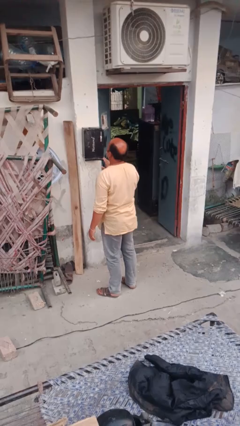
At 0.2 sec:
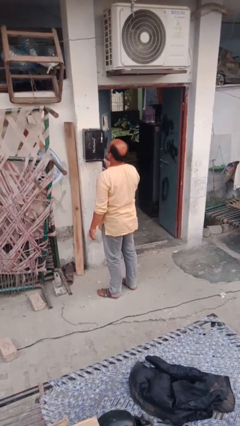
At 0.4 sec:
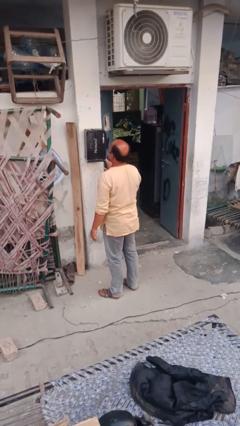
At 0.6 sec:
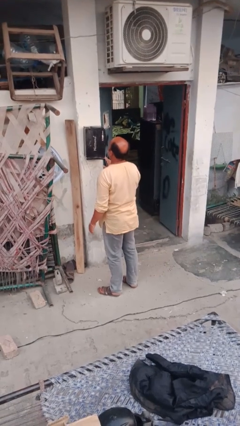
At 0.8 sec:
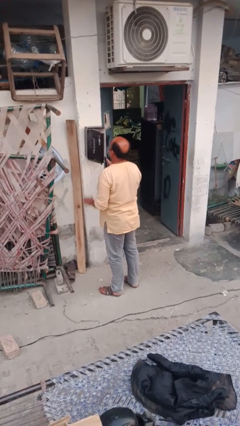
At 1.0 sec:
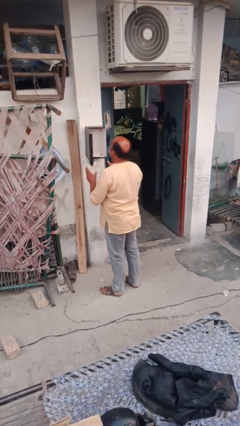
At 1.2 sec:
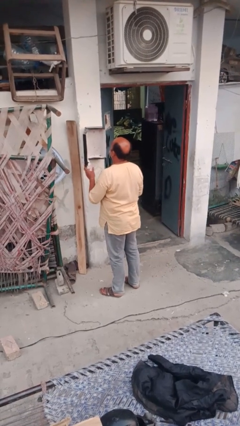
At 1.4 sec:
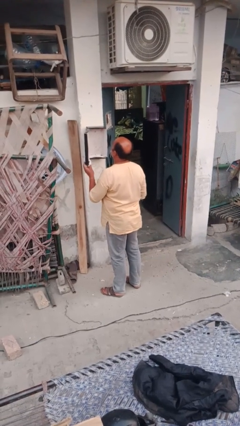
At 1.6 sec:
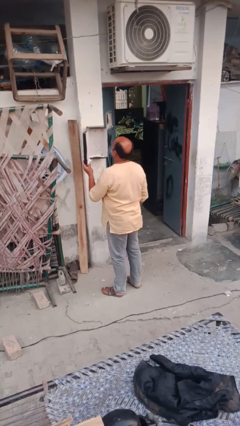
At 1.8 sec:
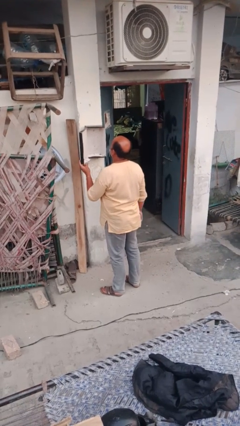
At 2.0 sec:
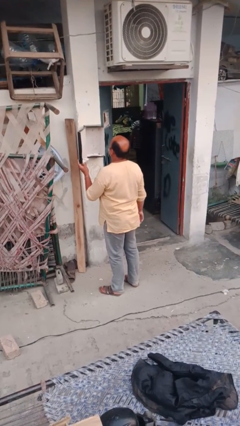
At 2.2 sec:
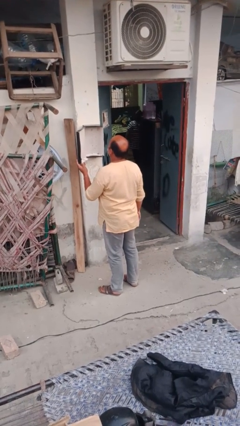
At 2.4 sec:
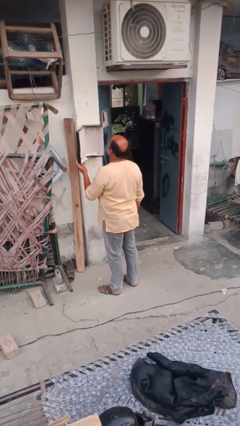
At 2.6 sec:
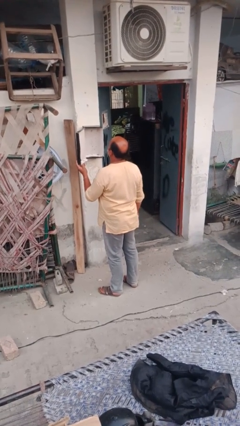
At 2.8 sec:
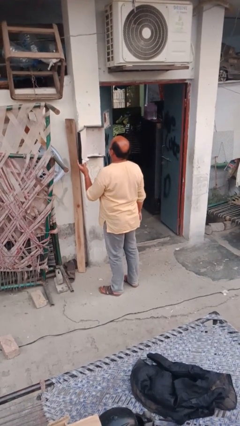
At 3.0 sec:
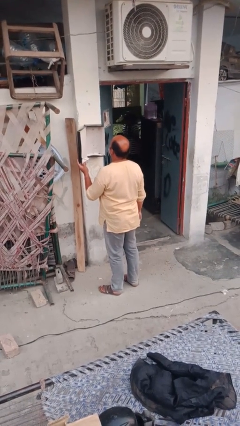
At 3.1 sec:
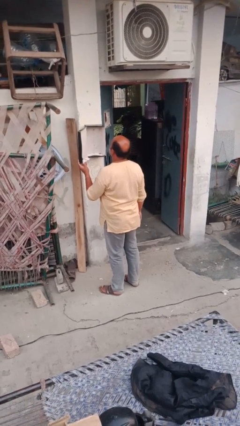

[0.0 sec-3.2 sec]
person opens mailbox

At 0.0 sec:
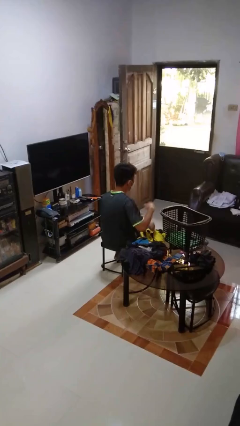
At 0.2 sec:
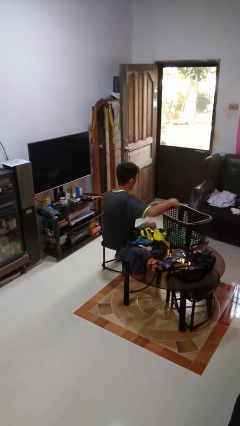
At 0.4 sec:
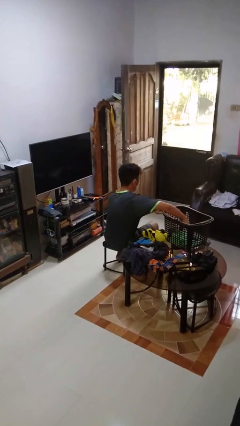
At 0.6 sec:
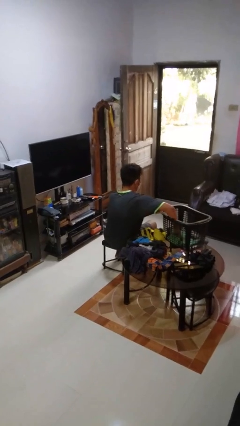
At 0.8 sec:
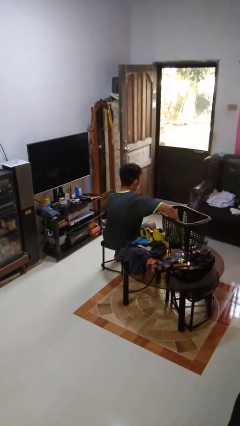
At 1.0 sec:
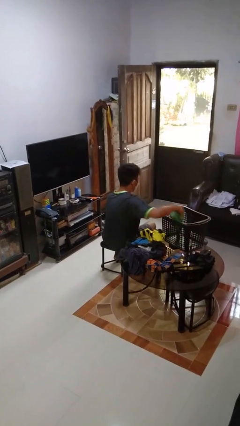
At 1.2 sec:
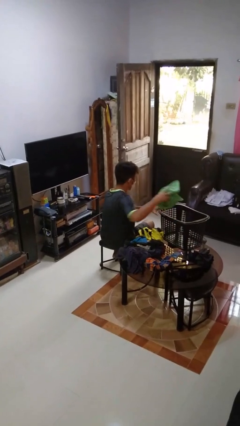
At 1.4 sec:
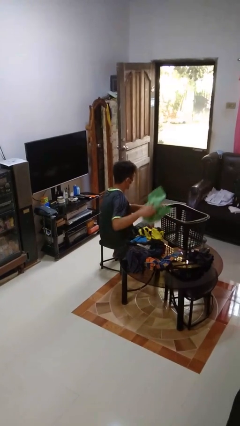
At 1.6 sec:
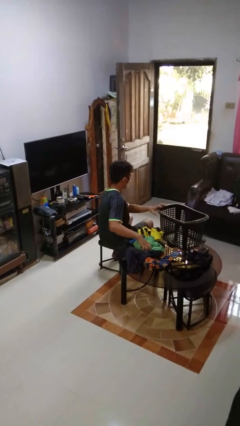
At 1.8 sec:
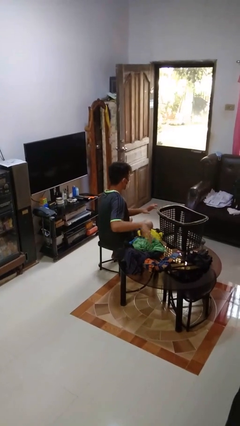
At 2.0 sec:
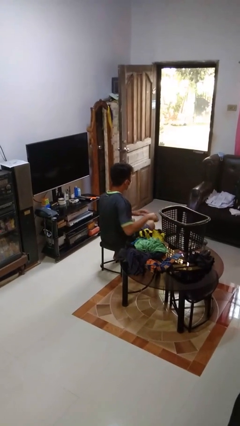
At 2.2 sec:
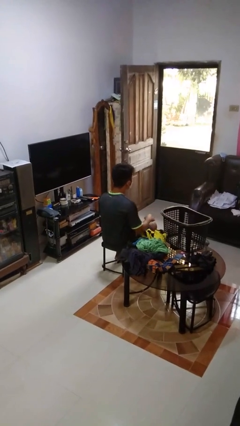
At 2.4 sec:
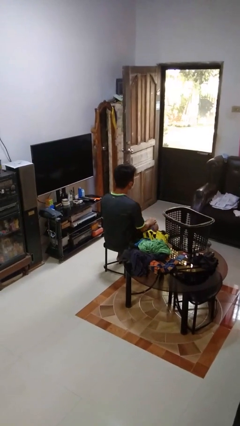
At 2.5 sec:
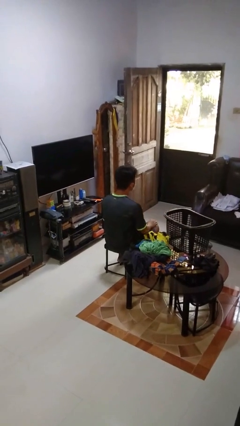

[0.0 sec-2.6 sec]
person takes object from basket

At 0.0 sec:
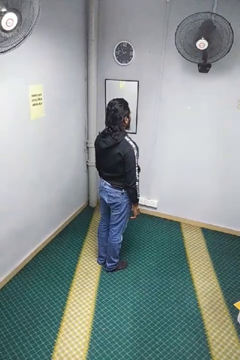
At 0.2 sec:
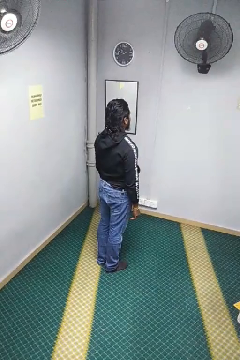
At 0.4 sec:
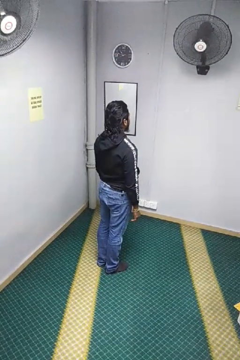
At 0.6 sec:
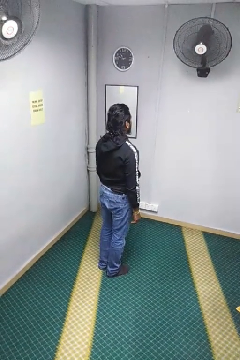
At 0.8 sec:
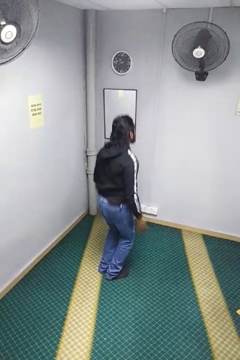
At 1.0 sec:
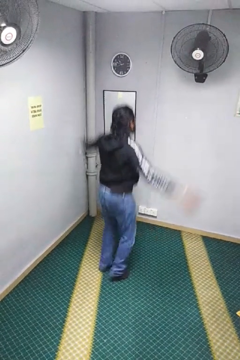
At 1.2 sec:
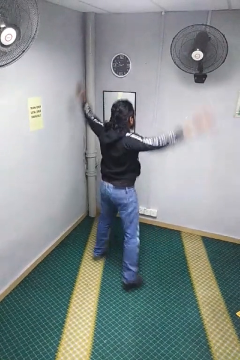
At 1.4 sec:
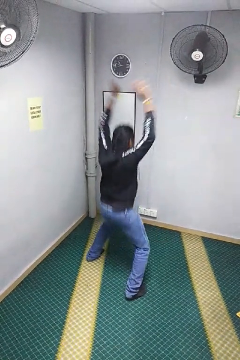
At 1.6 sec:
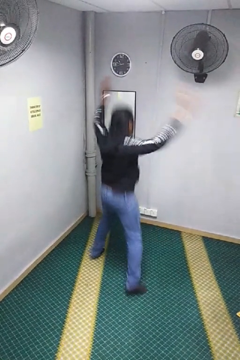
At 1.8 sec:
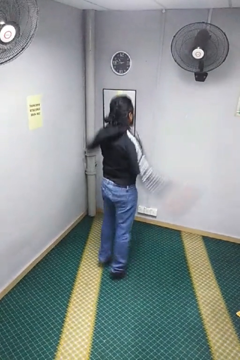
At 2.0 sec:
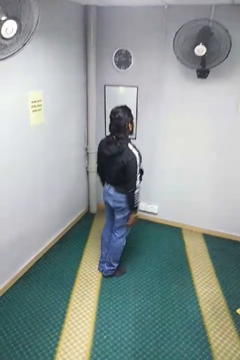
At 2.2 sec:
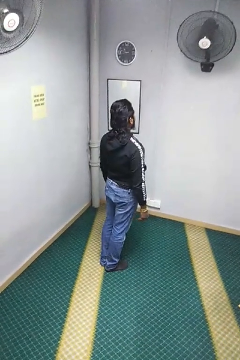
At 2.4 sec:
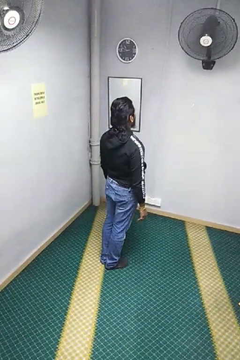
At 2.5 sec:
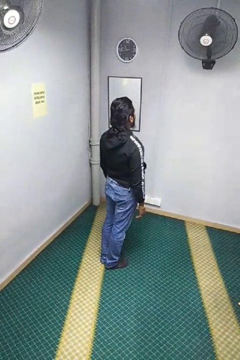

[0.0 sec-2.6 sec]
person exercises with jumping jacks

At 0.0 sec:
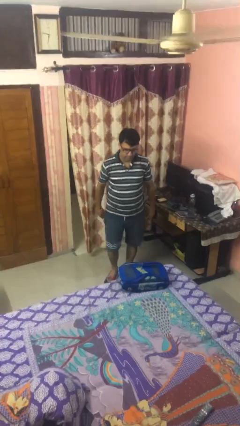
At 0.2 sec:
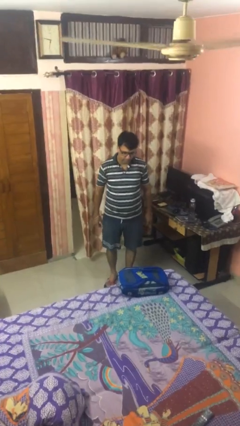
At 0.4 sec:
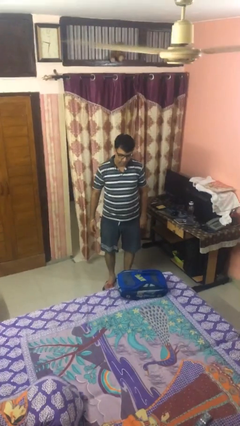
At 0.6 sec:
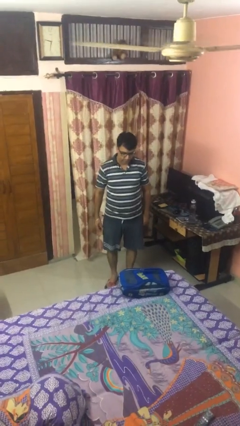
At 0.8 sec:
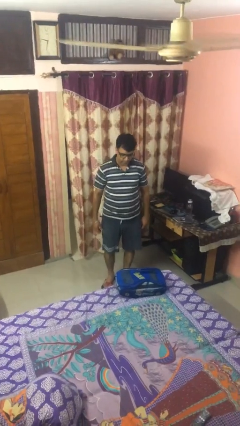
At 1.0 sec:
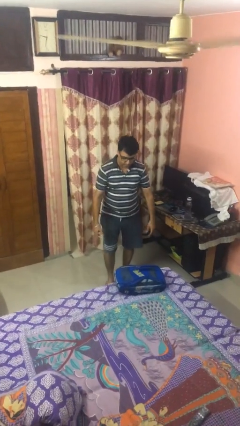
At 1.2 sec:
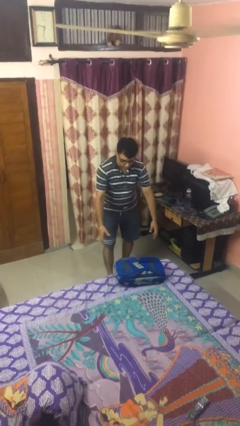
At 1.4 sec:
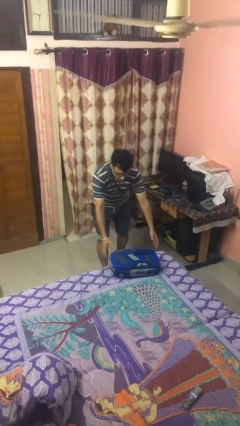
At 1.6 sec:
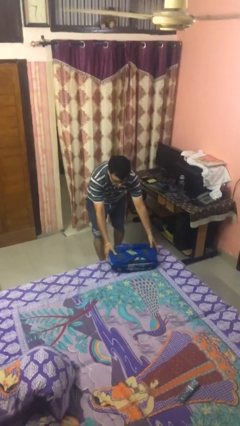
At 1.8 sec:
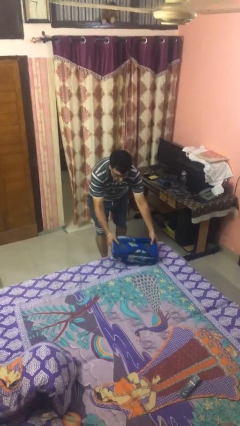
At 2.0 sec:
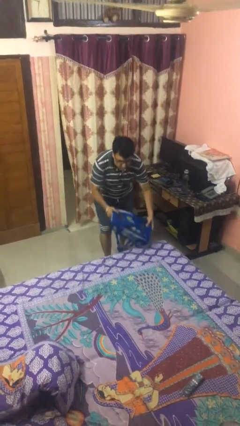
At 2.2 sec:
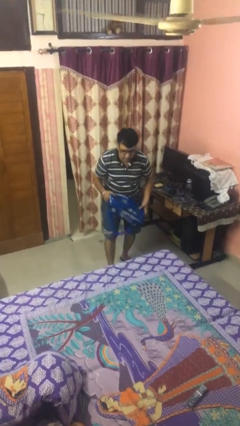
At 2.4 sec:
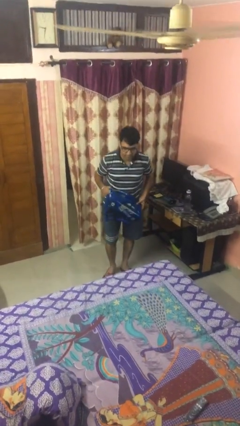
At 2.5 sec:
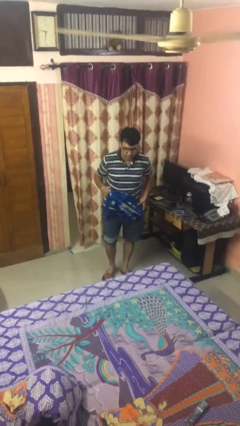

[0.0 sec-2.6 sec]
person picks up object from bed

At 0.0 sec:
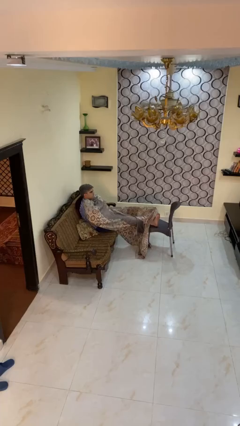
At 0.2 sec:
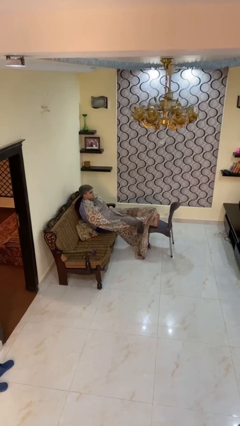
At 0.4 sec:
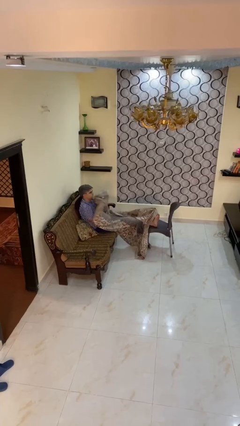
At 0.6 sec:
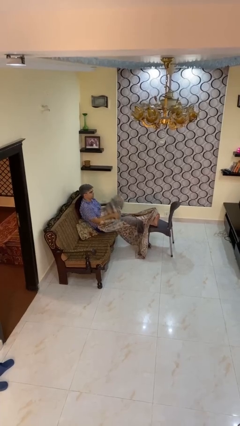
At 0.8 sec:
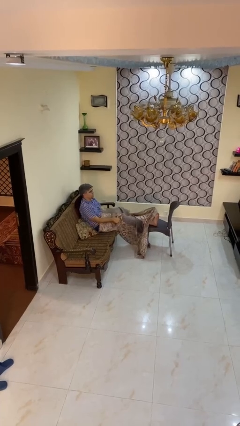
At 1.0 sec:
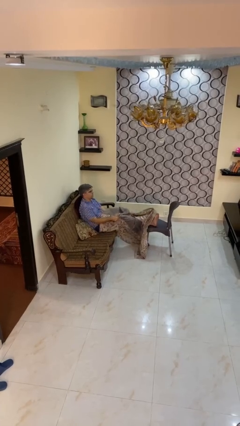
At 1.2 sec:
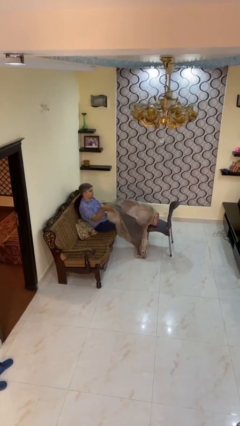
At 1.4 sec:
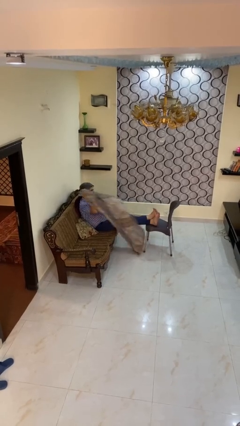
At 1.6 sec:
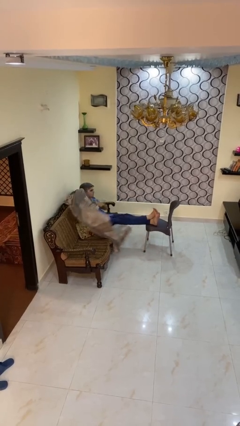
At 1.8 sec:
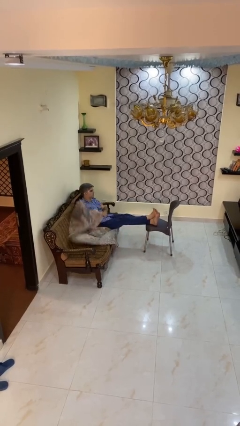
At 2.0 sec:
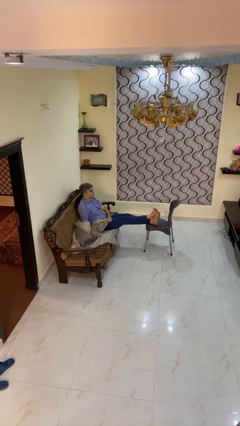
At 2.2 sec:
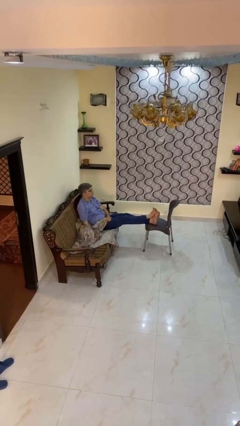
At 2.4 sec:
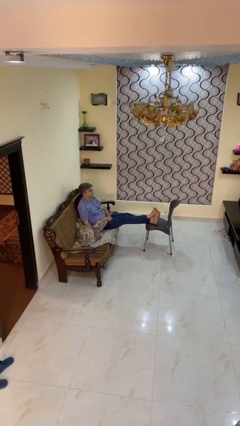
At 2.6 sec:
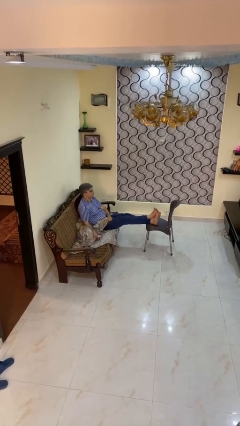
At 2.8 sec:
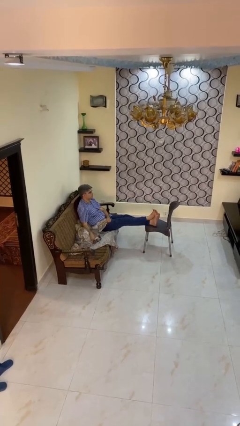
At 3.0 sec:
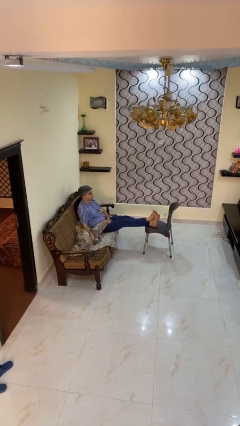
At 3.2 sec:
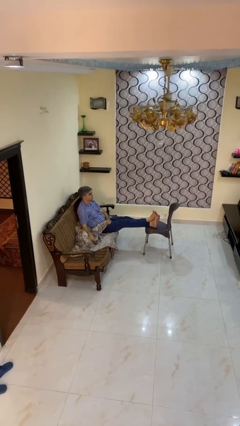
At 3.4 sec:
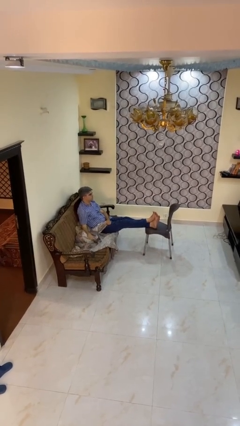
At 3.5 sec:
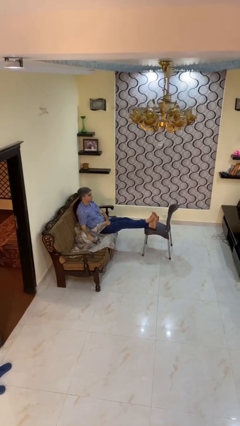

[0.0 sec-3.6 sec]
person uncovers with blanket

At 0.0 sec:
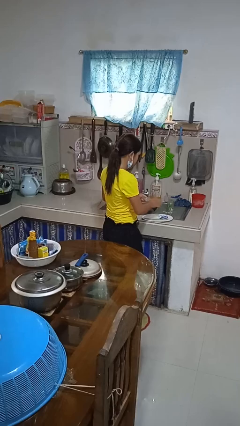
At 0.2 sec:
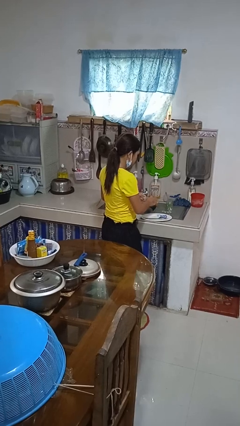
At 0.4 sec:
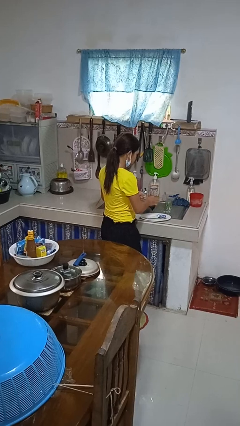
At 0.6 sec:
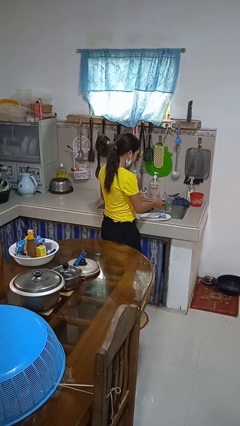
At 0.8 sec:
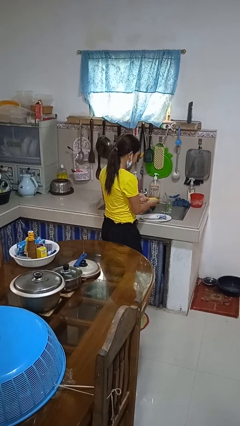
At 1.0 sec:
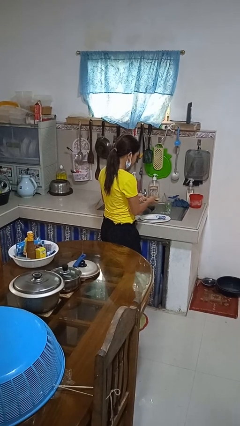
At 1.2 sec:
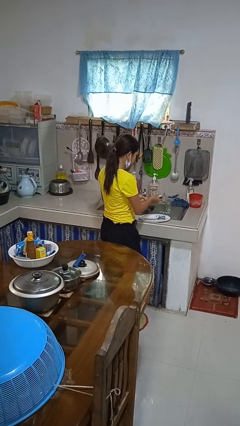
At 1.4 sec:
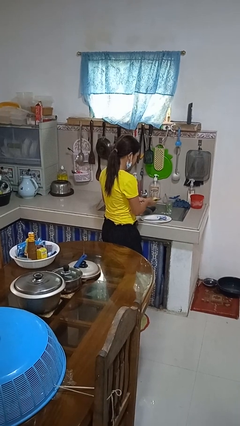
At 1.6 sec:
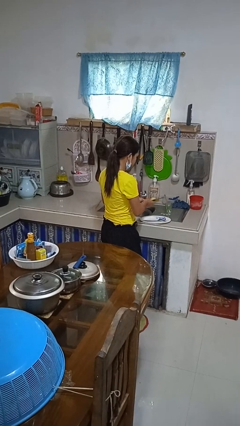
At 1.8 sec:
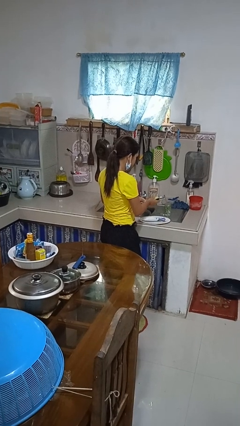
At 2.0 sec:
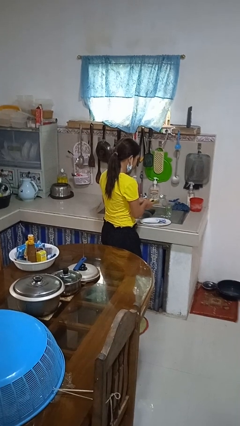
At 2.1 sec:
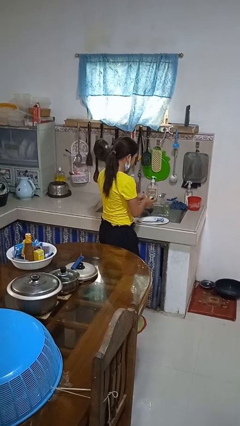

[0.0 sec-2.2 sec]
person washes dish

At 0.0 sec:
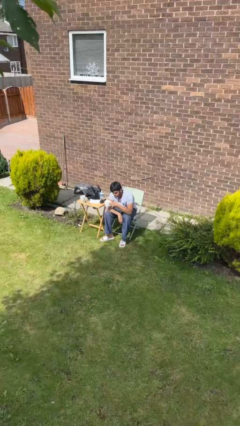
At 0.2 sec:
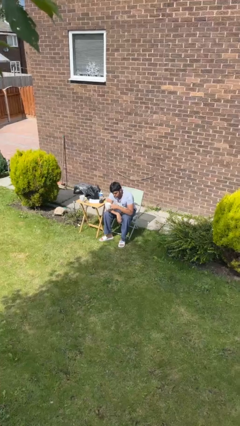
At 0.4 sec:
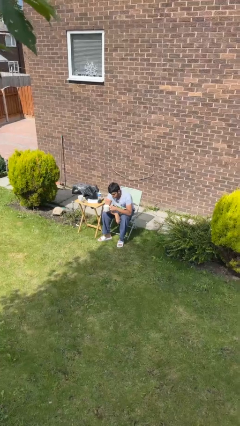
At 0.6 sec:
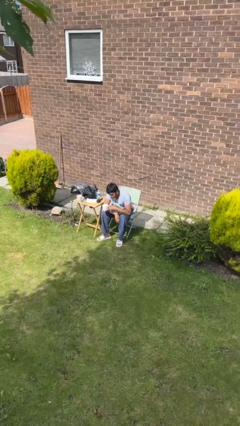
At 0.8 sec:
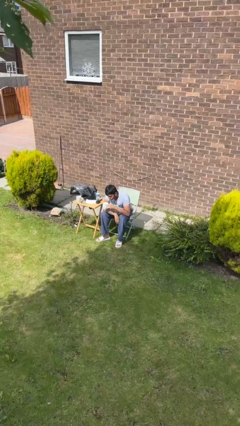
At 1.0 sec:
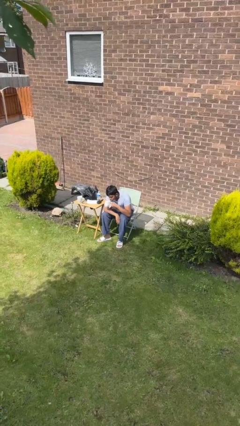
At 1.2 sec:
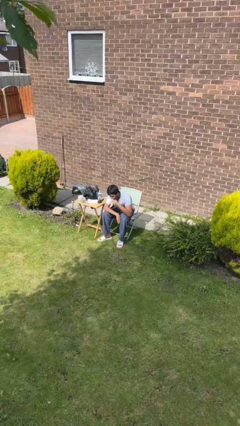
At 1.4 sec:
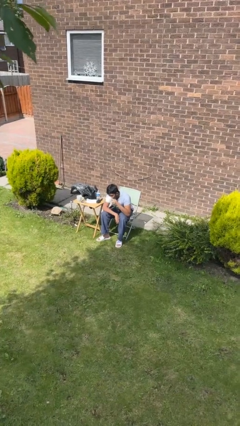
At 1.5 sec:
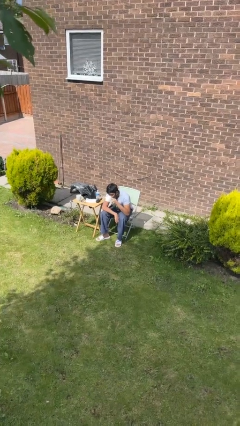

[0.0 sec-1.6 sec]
person drinks from mug
